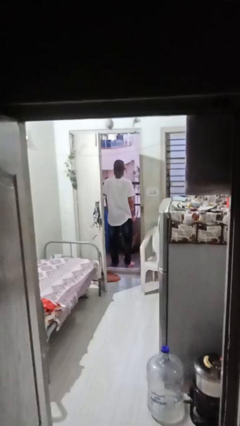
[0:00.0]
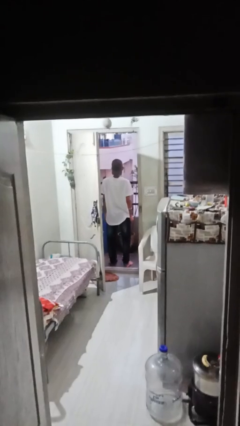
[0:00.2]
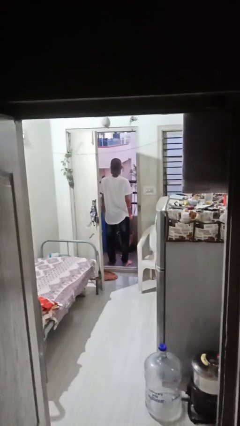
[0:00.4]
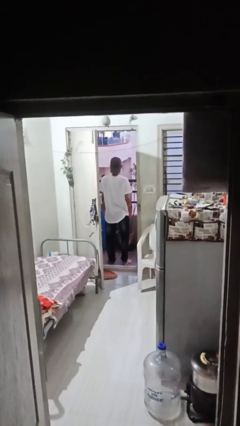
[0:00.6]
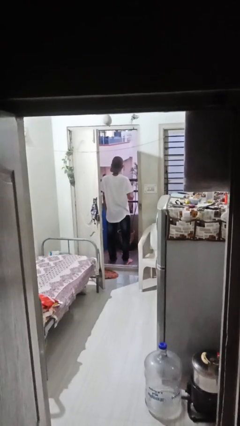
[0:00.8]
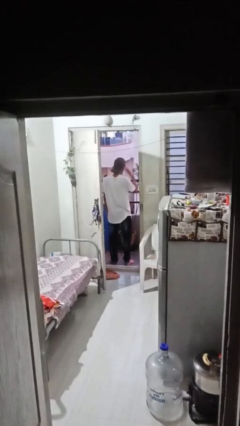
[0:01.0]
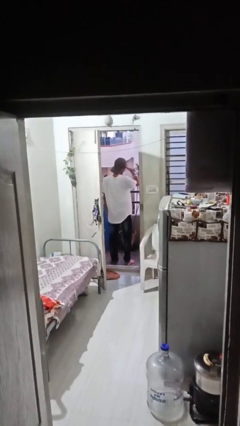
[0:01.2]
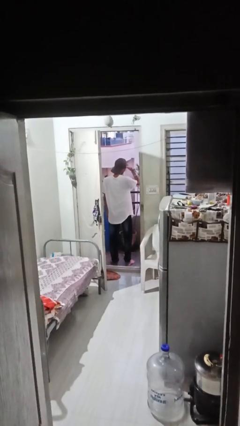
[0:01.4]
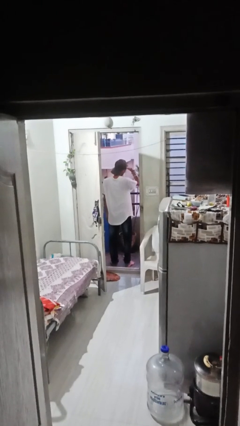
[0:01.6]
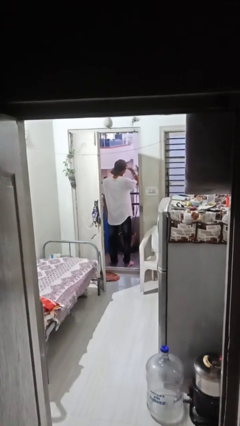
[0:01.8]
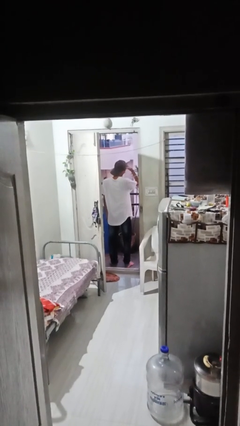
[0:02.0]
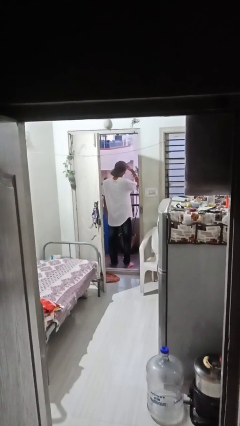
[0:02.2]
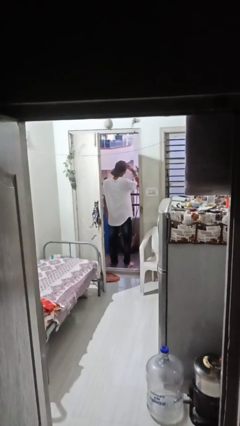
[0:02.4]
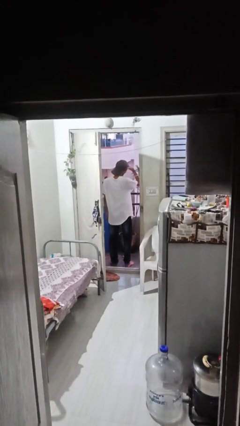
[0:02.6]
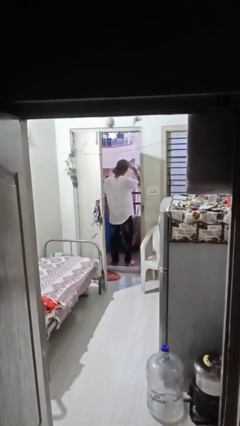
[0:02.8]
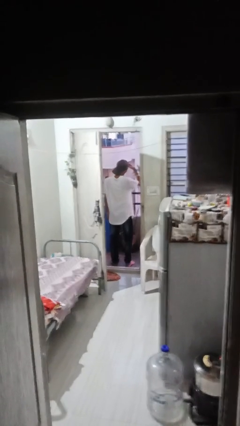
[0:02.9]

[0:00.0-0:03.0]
person shades eyes

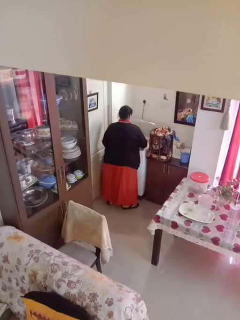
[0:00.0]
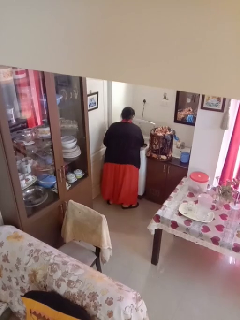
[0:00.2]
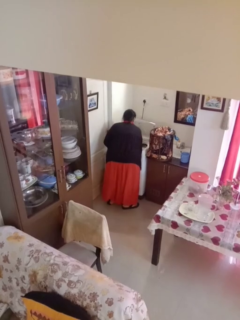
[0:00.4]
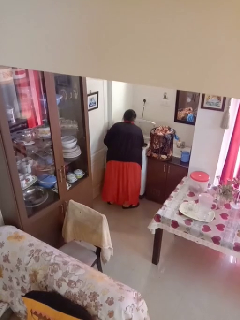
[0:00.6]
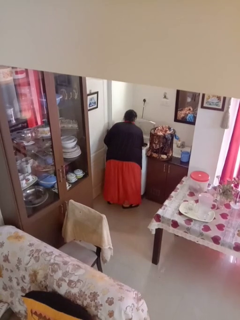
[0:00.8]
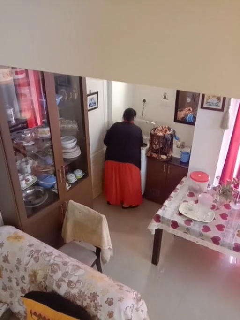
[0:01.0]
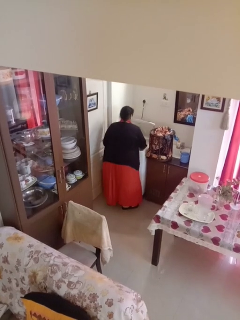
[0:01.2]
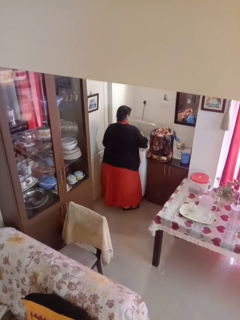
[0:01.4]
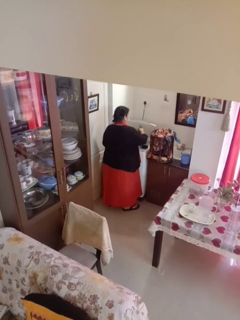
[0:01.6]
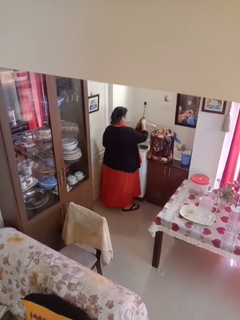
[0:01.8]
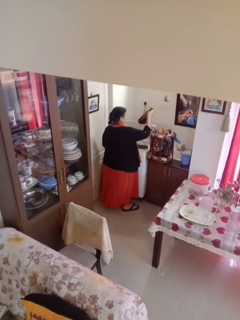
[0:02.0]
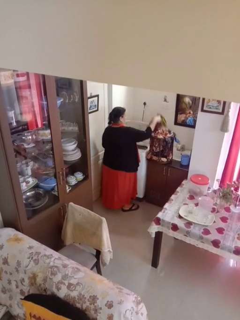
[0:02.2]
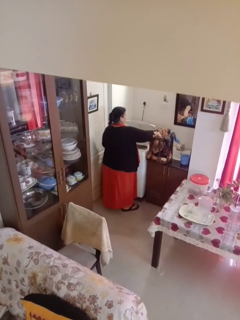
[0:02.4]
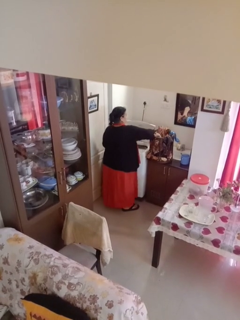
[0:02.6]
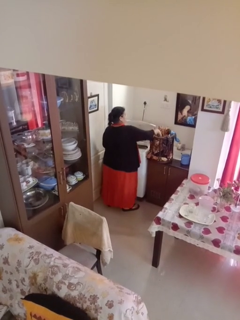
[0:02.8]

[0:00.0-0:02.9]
person loads clotheswasher

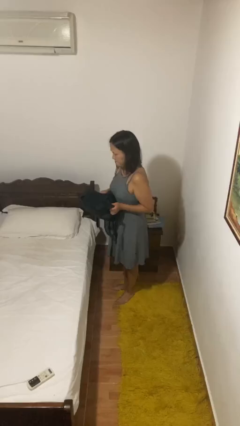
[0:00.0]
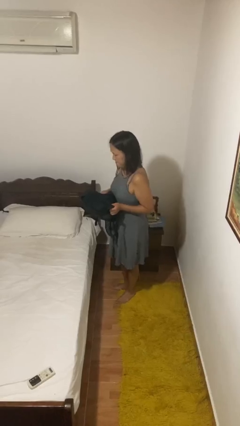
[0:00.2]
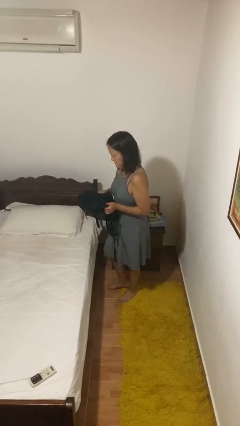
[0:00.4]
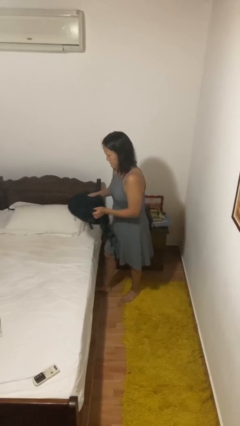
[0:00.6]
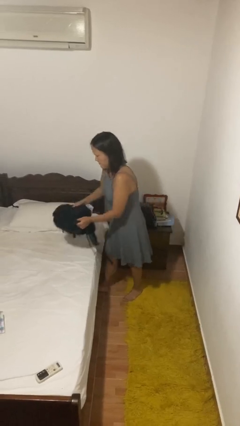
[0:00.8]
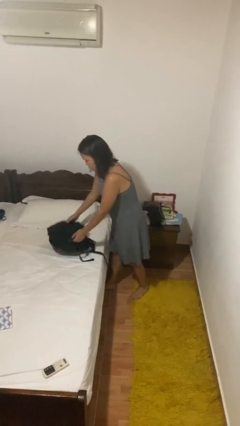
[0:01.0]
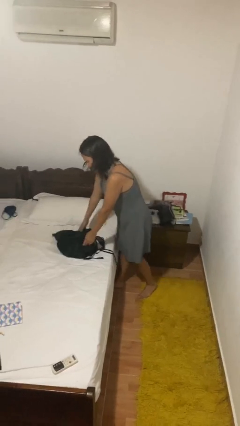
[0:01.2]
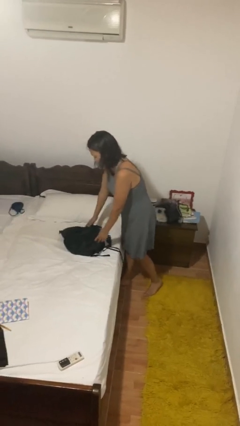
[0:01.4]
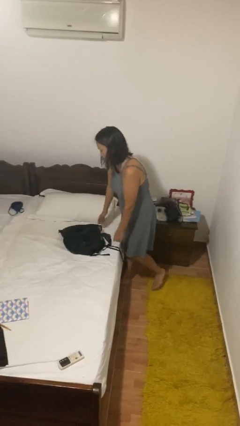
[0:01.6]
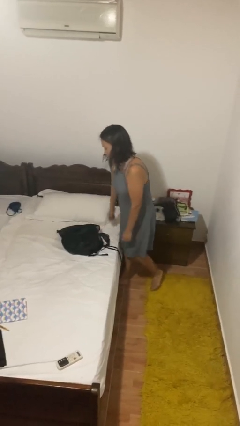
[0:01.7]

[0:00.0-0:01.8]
person puts down object on bed

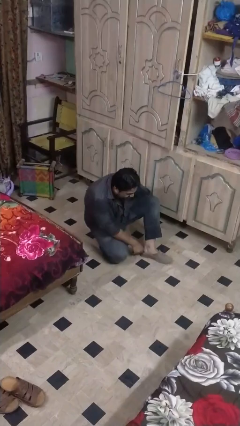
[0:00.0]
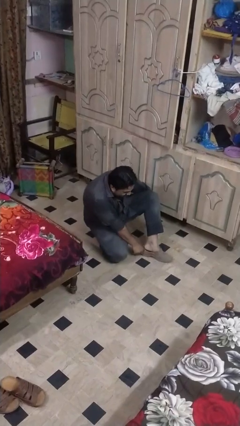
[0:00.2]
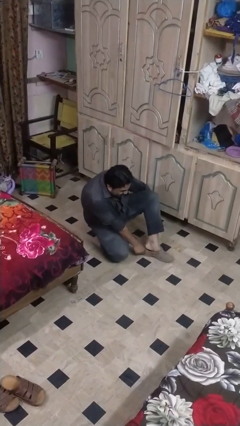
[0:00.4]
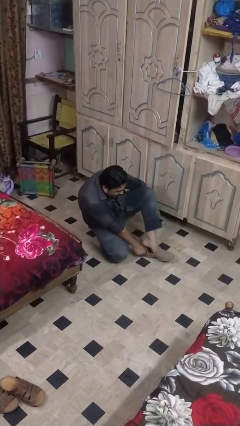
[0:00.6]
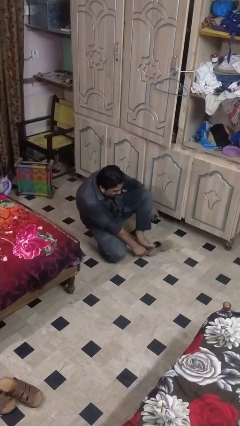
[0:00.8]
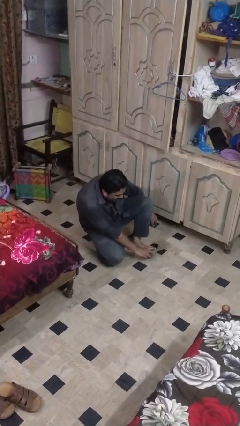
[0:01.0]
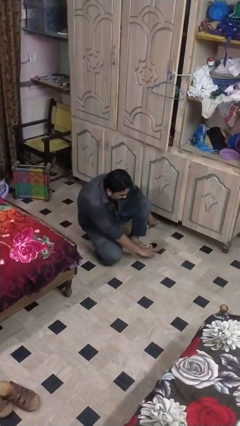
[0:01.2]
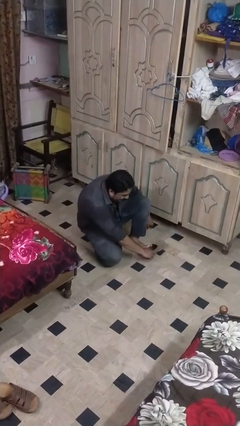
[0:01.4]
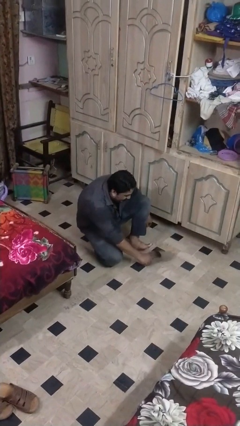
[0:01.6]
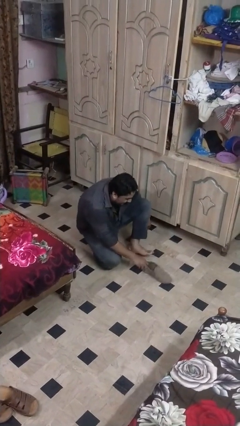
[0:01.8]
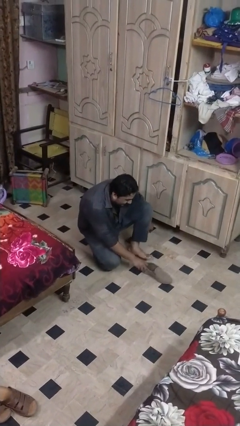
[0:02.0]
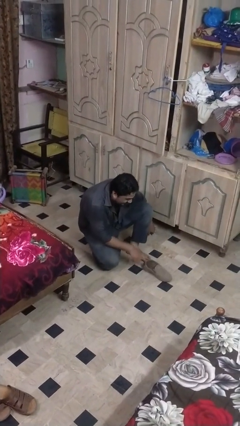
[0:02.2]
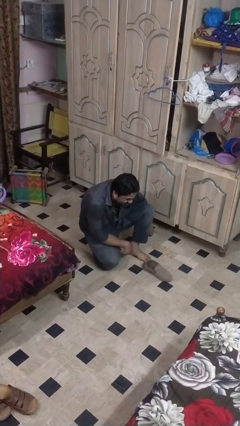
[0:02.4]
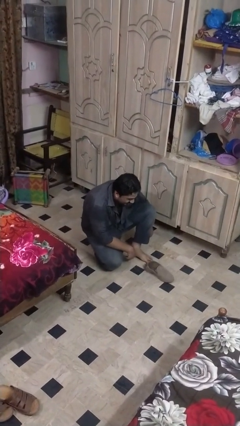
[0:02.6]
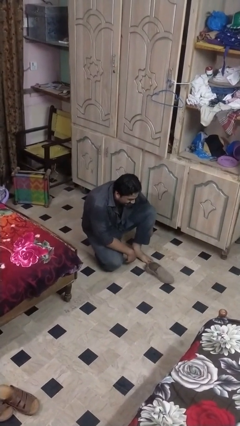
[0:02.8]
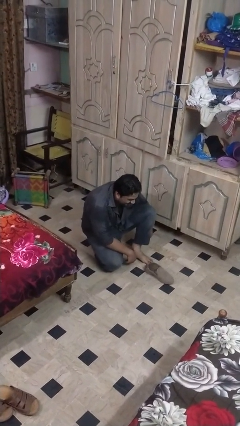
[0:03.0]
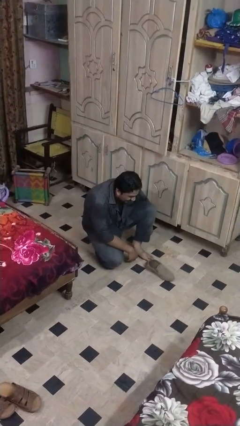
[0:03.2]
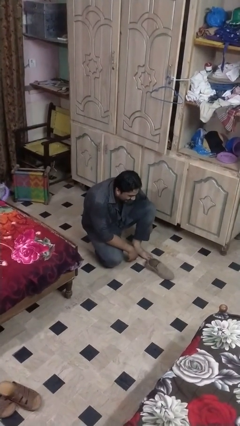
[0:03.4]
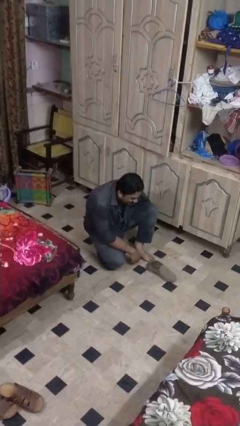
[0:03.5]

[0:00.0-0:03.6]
person takes off boots

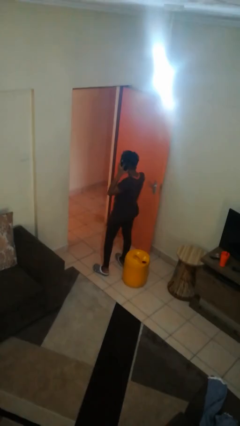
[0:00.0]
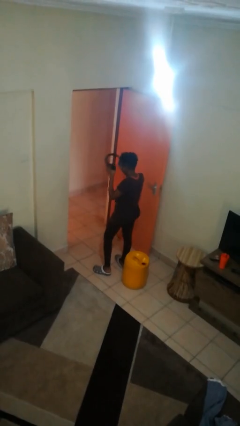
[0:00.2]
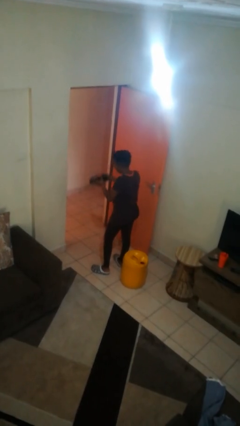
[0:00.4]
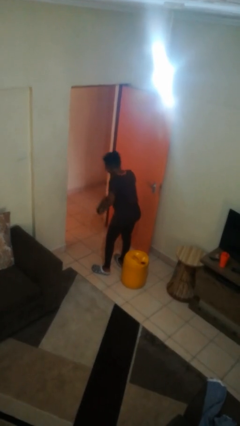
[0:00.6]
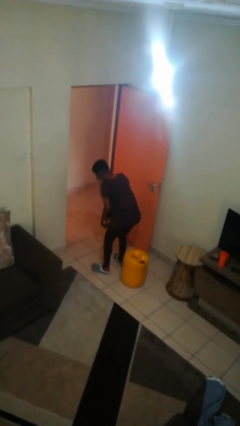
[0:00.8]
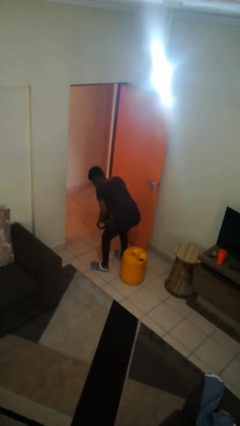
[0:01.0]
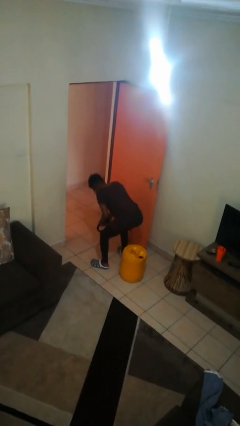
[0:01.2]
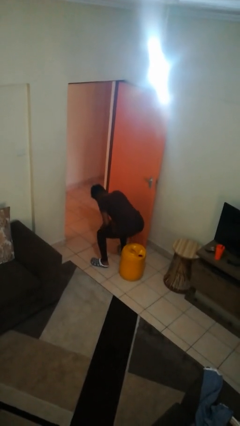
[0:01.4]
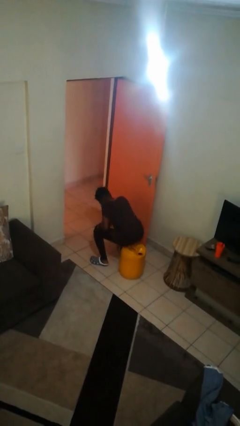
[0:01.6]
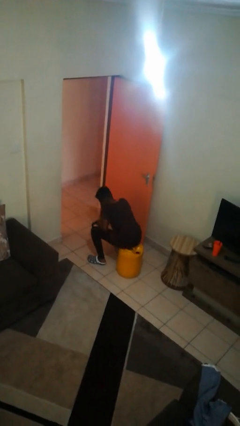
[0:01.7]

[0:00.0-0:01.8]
person takes off headphones

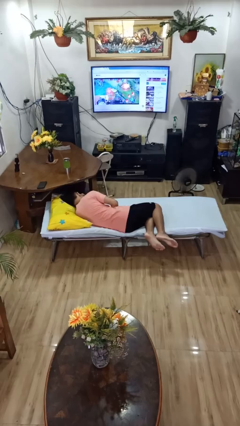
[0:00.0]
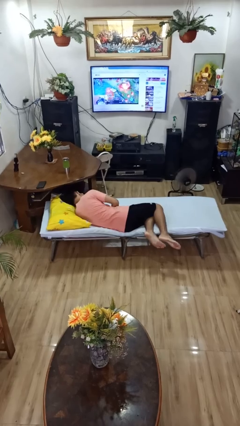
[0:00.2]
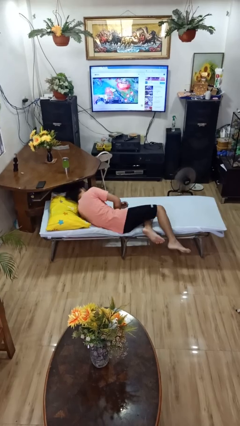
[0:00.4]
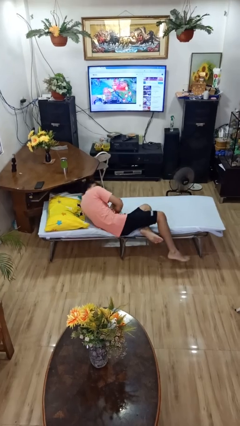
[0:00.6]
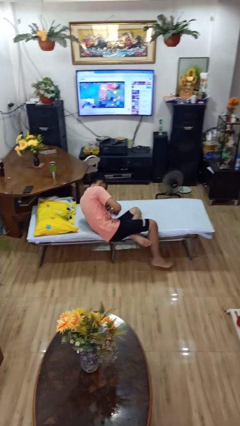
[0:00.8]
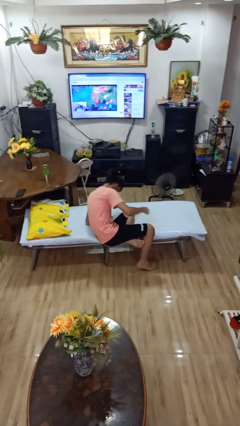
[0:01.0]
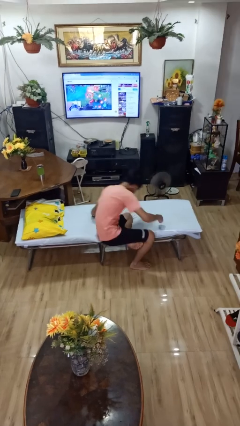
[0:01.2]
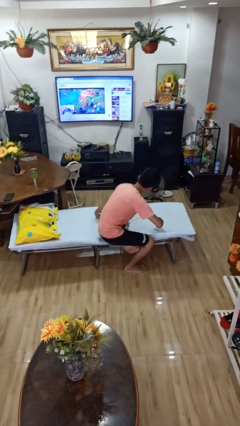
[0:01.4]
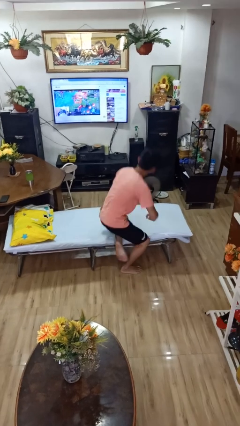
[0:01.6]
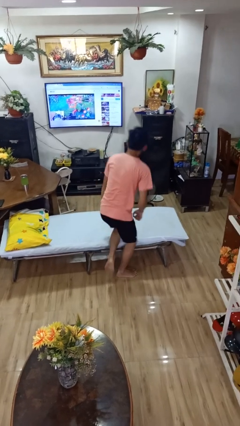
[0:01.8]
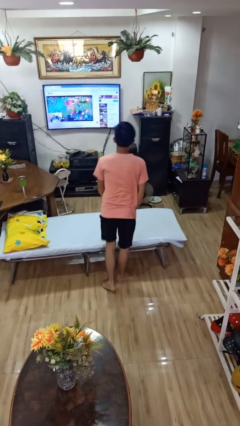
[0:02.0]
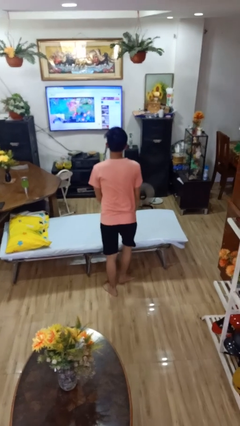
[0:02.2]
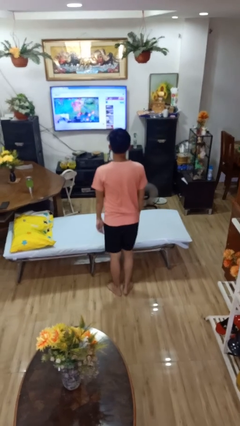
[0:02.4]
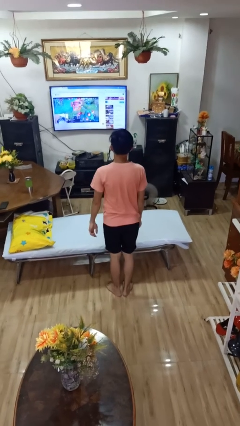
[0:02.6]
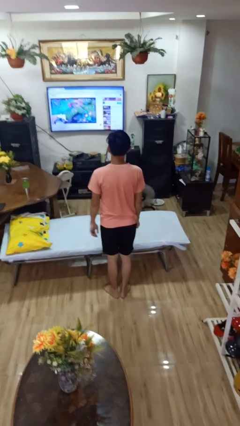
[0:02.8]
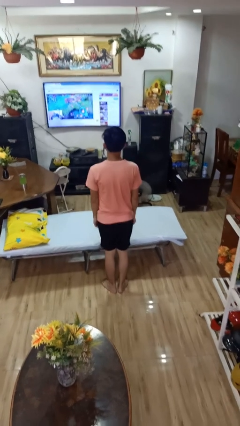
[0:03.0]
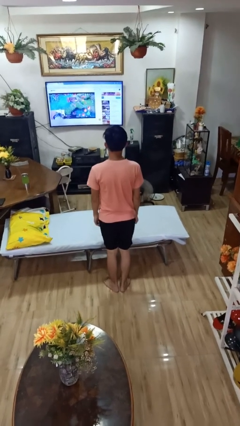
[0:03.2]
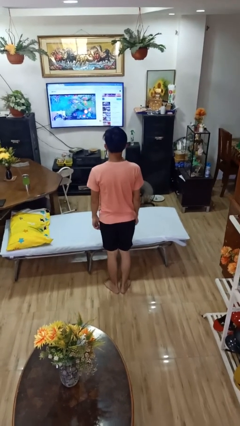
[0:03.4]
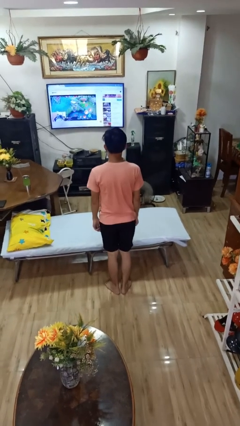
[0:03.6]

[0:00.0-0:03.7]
person stands up

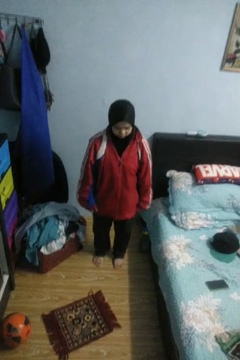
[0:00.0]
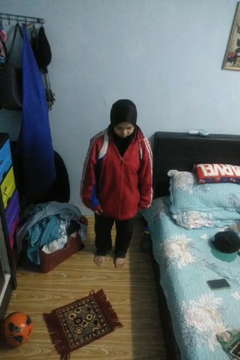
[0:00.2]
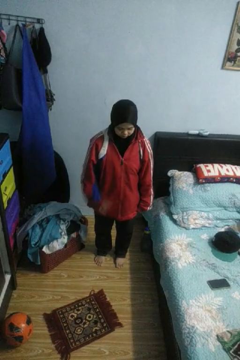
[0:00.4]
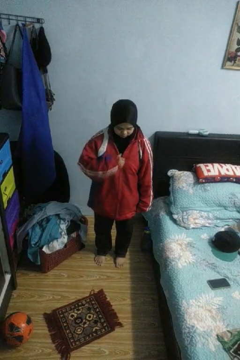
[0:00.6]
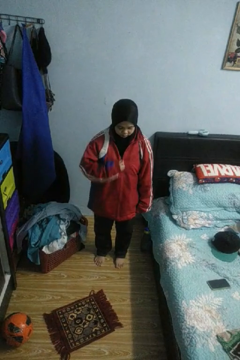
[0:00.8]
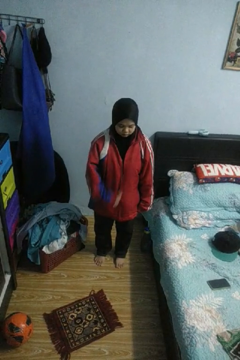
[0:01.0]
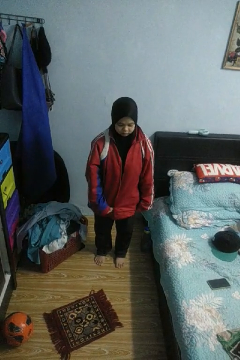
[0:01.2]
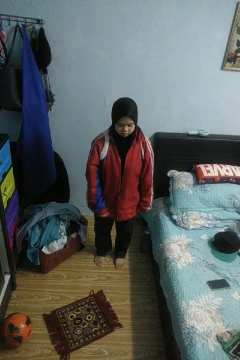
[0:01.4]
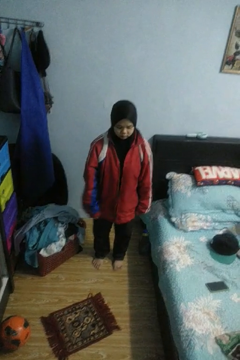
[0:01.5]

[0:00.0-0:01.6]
person unzips jacket
